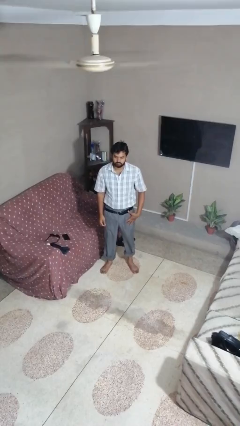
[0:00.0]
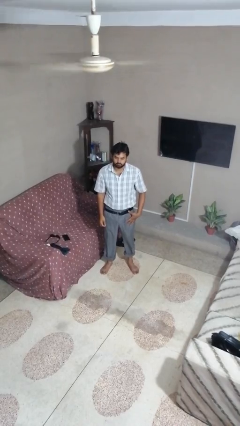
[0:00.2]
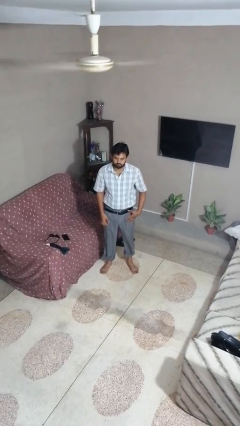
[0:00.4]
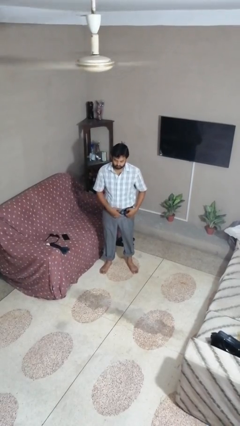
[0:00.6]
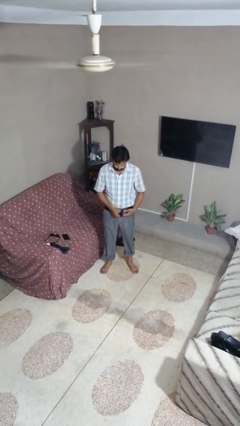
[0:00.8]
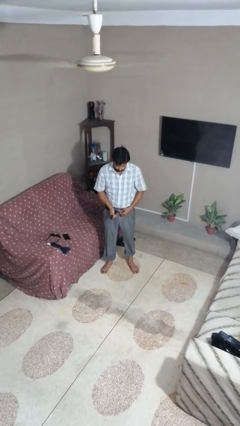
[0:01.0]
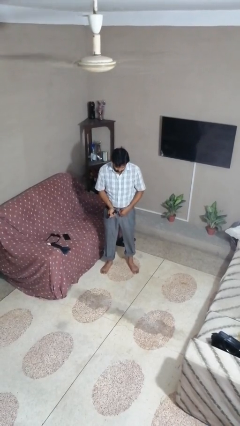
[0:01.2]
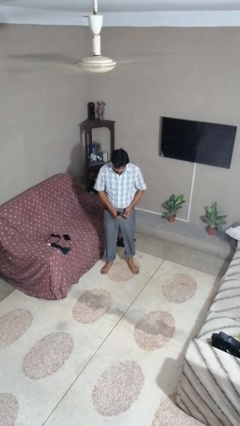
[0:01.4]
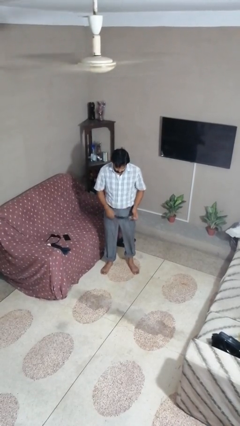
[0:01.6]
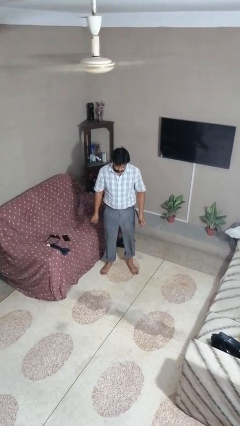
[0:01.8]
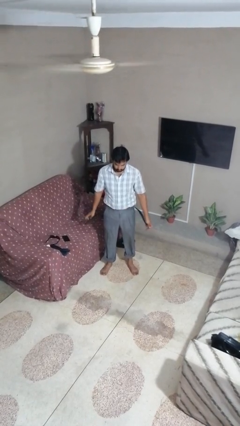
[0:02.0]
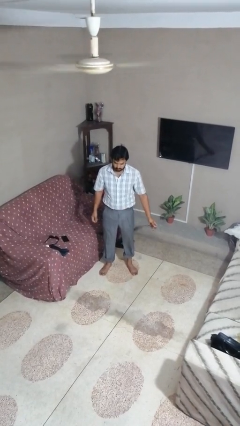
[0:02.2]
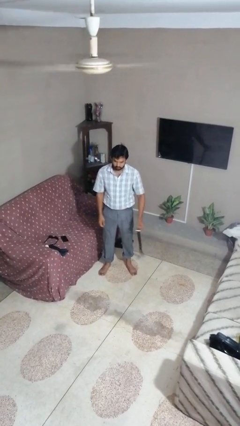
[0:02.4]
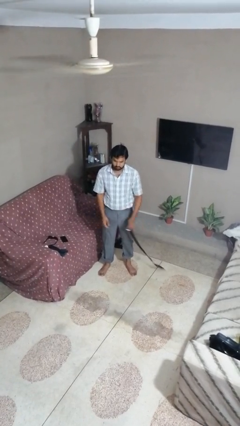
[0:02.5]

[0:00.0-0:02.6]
person takes off belt

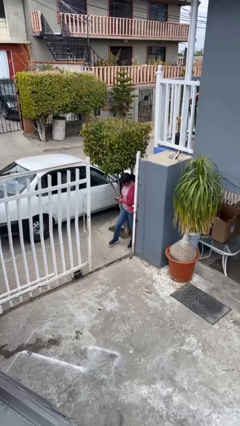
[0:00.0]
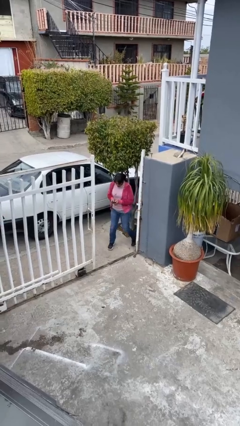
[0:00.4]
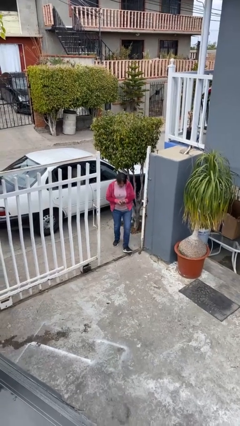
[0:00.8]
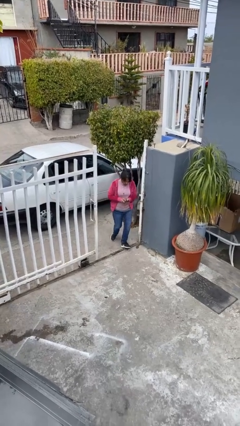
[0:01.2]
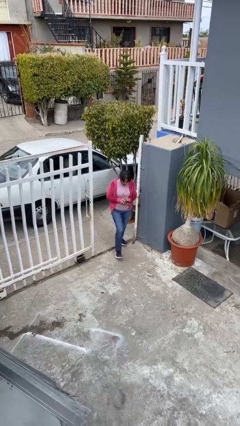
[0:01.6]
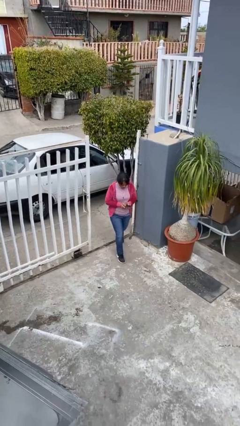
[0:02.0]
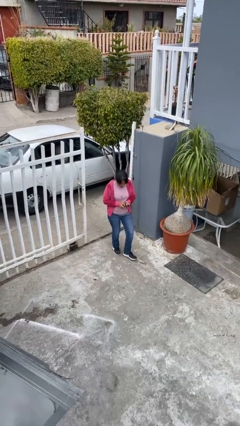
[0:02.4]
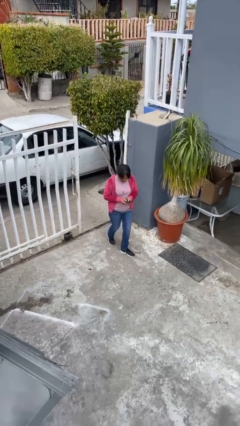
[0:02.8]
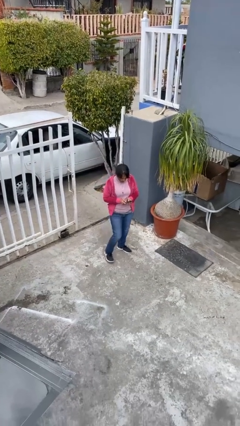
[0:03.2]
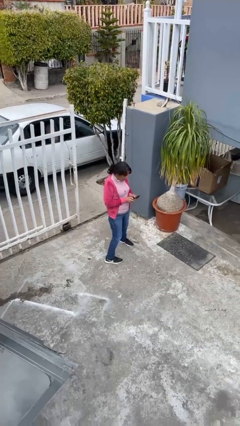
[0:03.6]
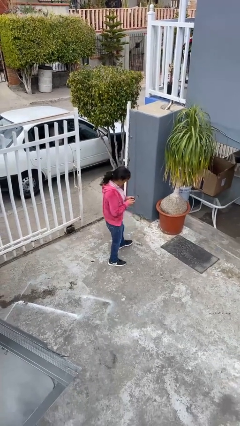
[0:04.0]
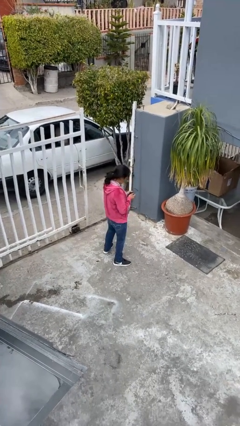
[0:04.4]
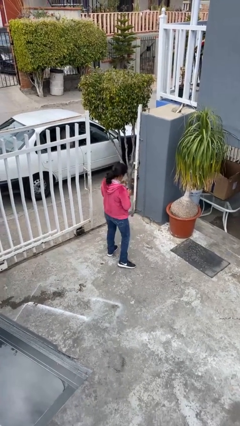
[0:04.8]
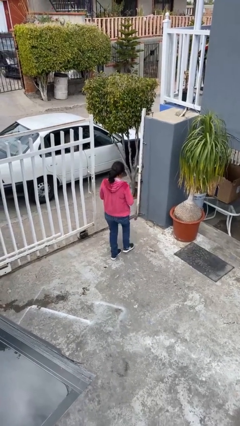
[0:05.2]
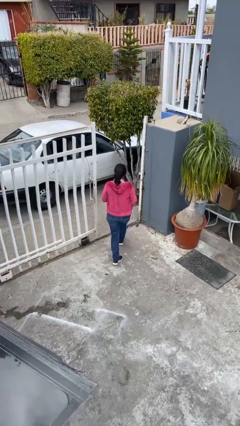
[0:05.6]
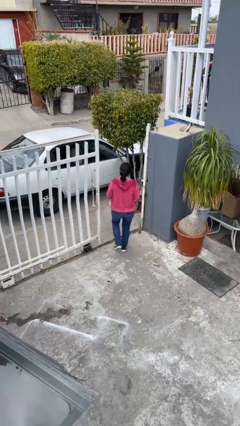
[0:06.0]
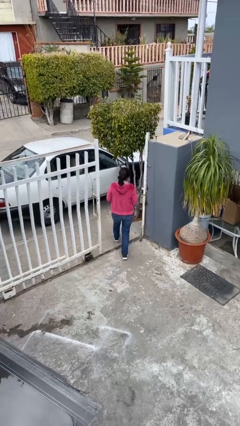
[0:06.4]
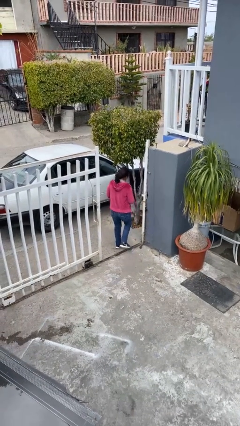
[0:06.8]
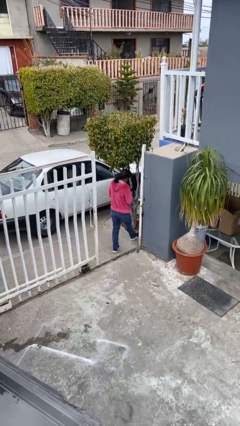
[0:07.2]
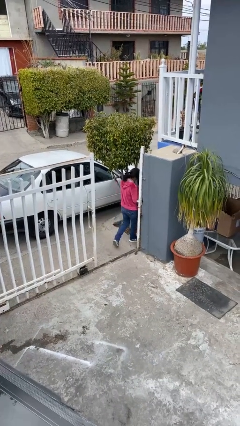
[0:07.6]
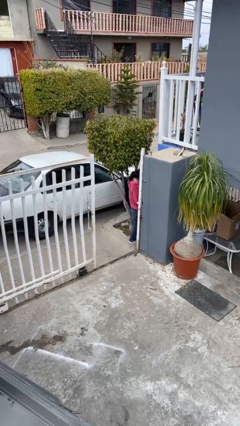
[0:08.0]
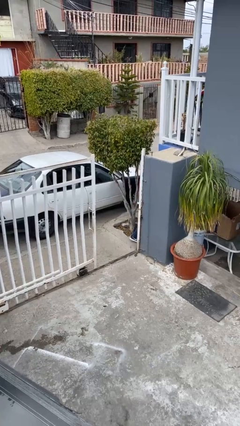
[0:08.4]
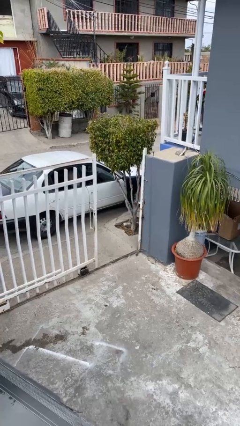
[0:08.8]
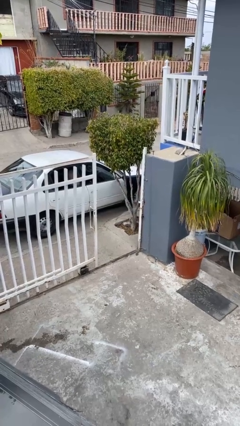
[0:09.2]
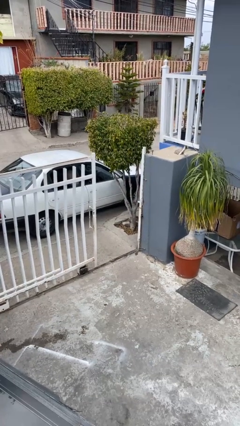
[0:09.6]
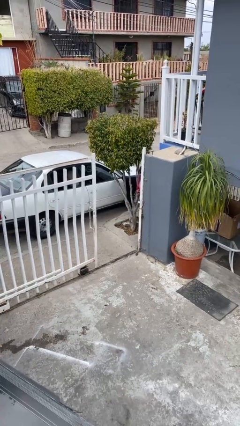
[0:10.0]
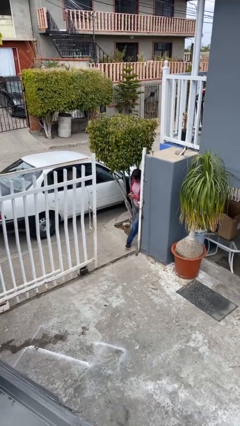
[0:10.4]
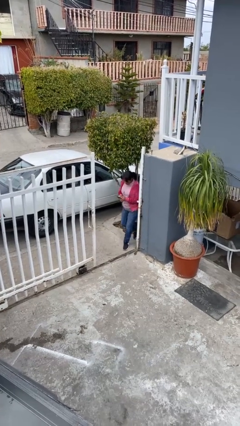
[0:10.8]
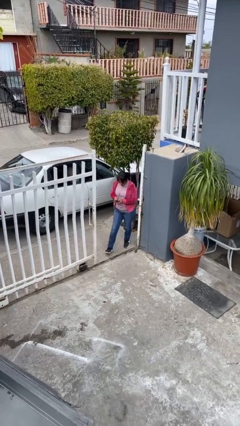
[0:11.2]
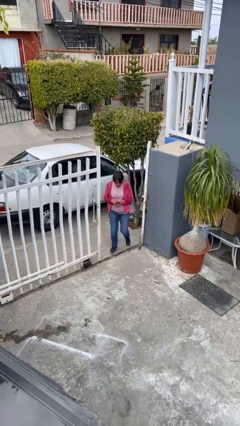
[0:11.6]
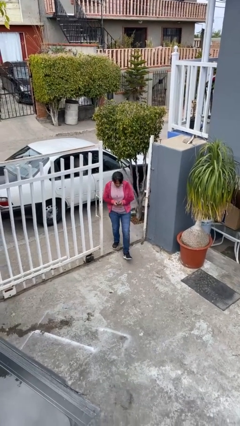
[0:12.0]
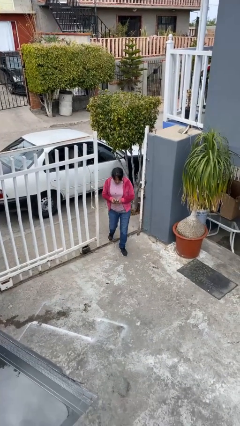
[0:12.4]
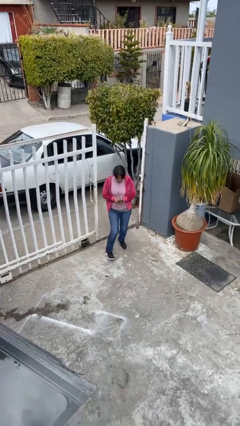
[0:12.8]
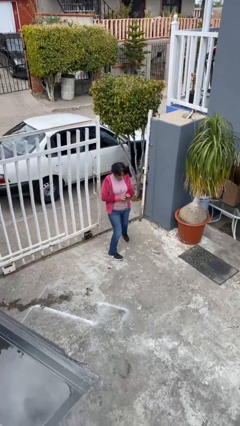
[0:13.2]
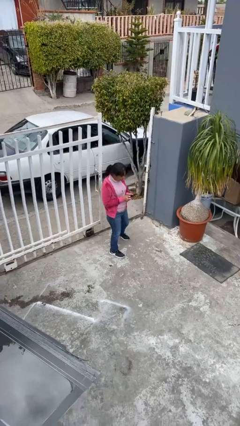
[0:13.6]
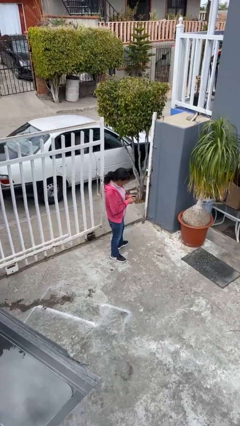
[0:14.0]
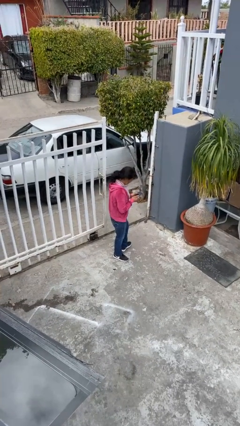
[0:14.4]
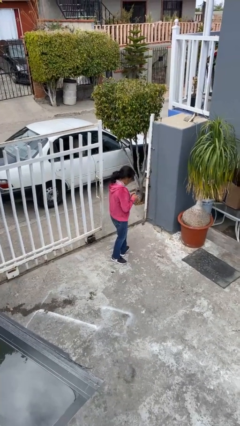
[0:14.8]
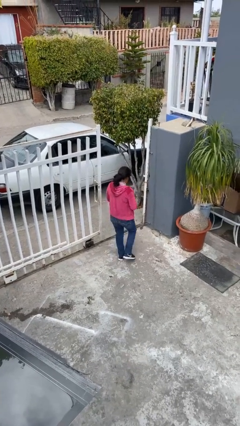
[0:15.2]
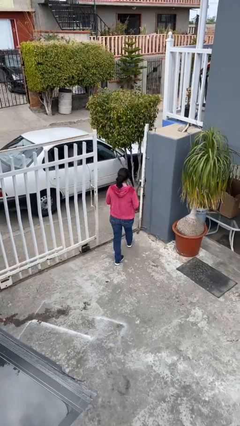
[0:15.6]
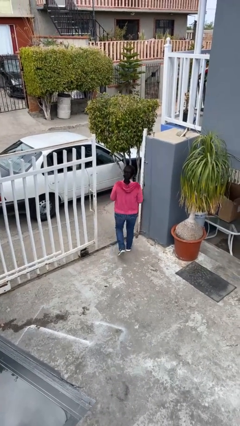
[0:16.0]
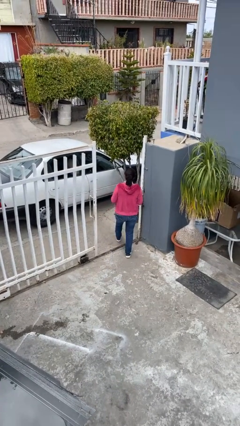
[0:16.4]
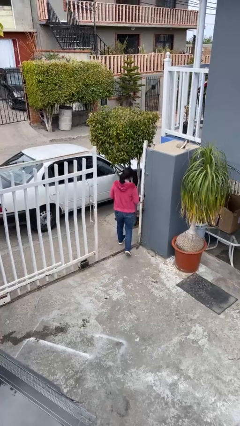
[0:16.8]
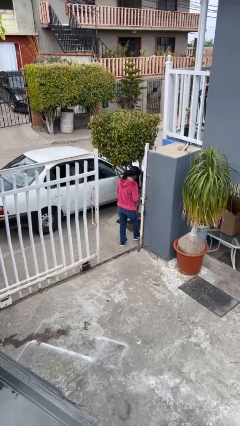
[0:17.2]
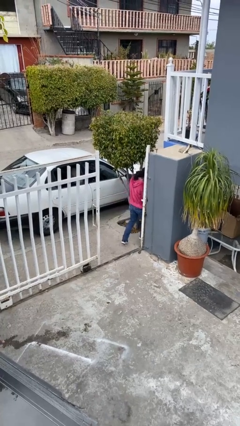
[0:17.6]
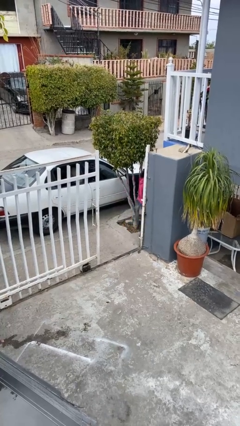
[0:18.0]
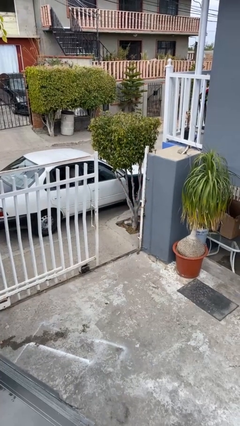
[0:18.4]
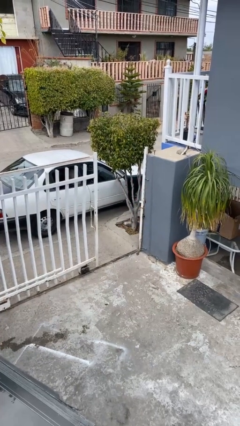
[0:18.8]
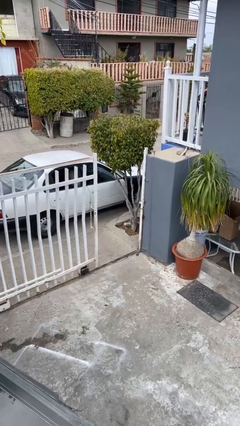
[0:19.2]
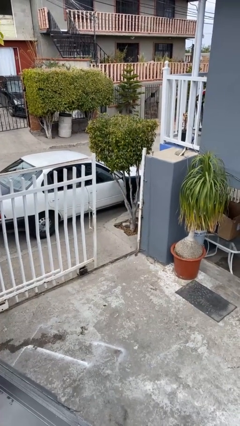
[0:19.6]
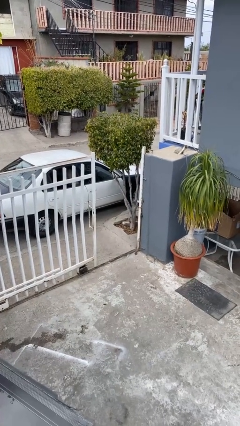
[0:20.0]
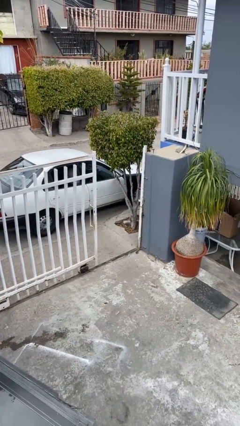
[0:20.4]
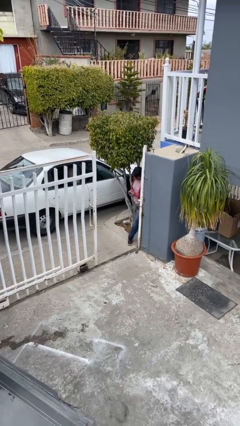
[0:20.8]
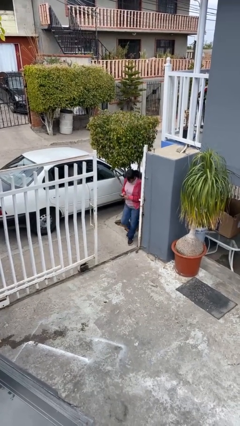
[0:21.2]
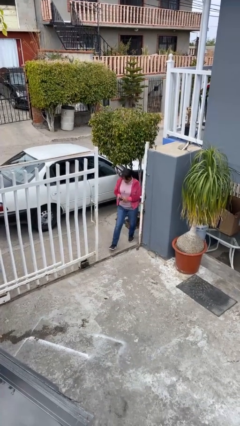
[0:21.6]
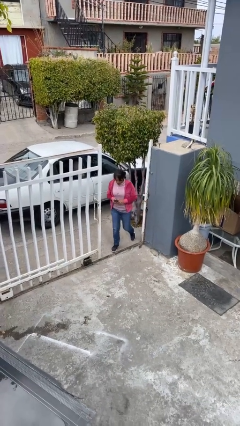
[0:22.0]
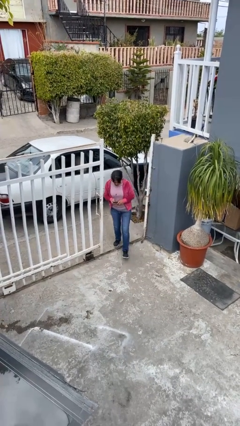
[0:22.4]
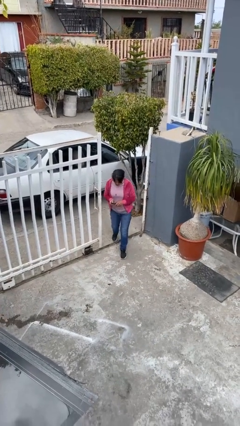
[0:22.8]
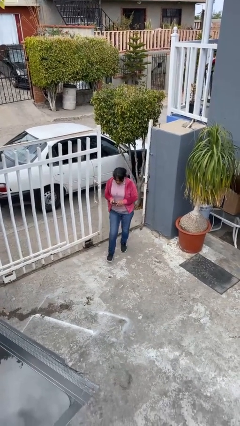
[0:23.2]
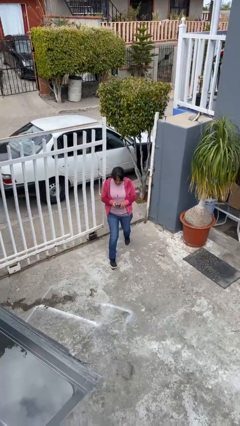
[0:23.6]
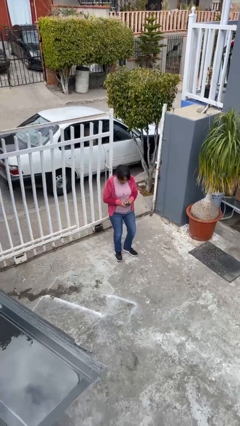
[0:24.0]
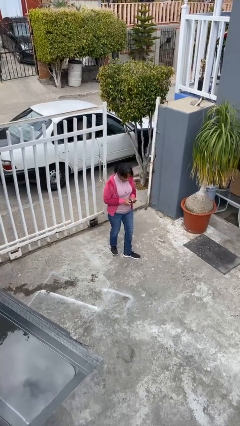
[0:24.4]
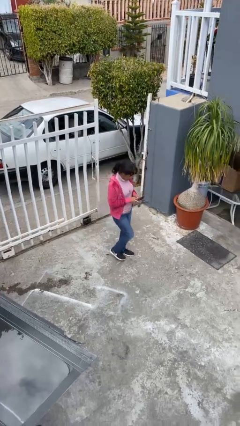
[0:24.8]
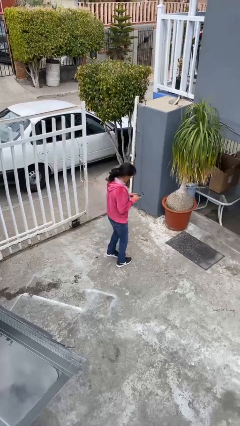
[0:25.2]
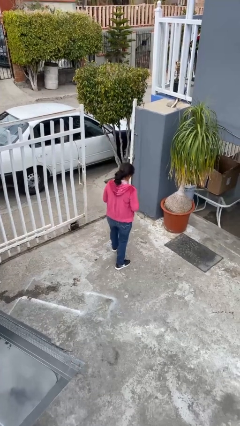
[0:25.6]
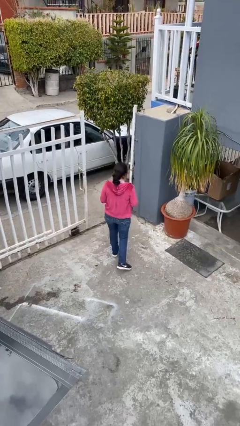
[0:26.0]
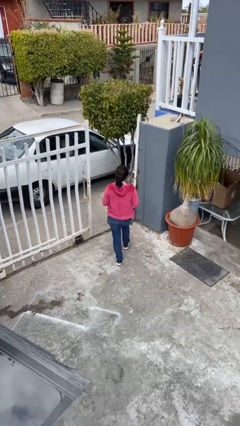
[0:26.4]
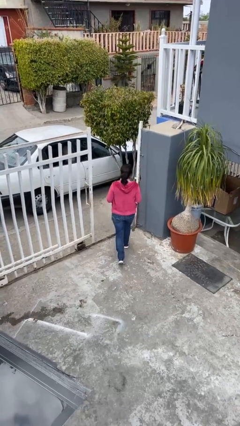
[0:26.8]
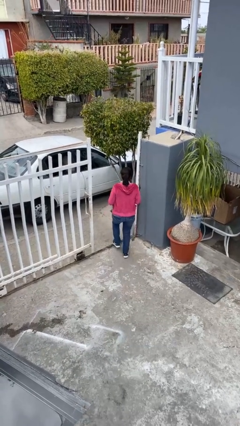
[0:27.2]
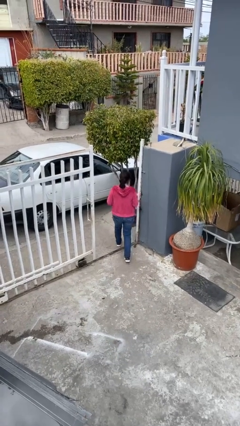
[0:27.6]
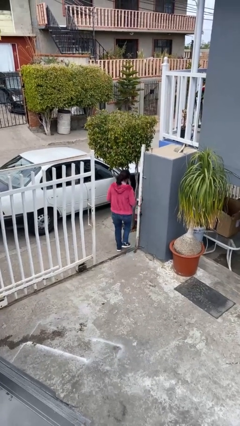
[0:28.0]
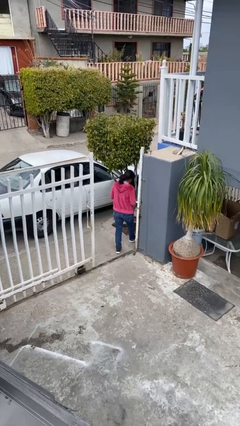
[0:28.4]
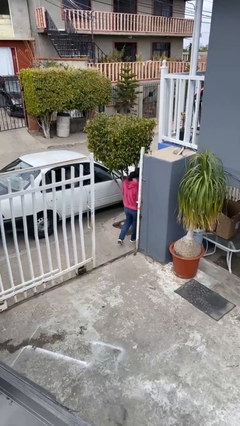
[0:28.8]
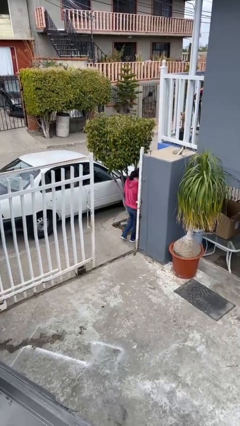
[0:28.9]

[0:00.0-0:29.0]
person texts on phone

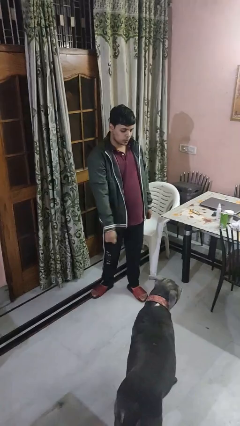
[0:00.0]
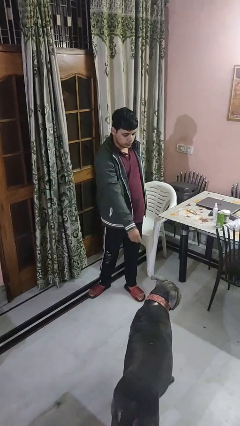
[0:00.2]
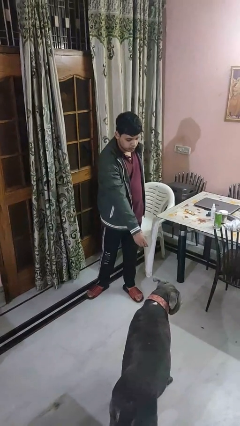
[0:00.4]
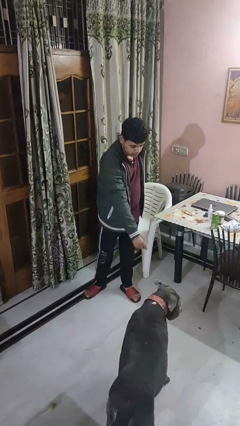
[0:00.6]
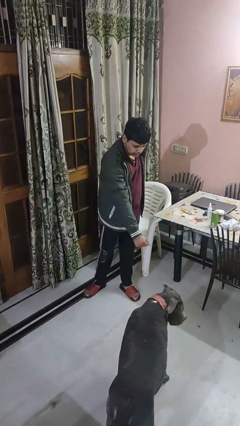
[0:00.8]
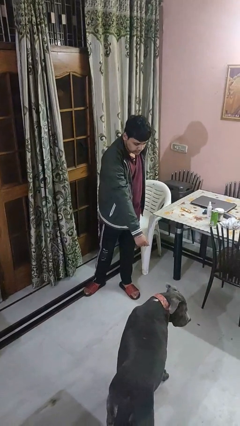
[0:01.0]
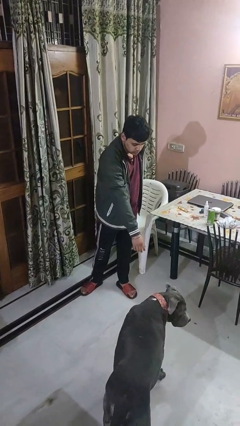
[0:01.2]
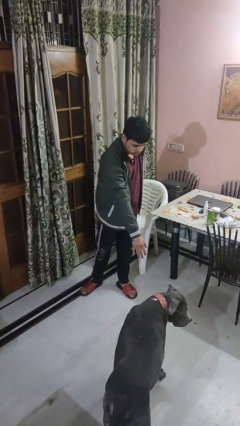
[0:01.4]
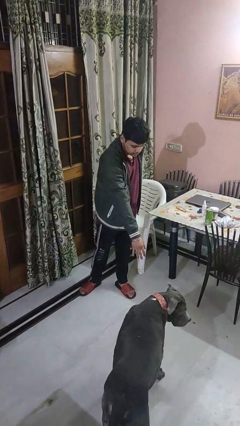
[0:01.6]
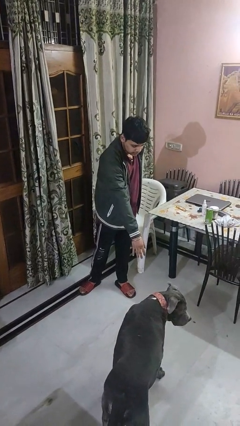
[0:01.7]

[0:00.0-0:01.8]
person points to dog
